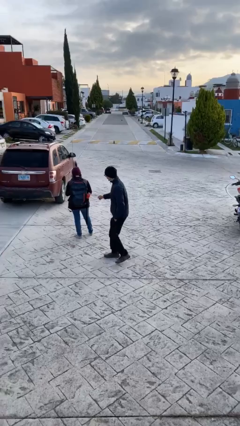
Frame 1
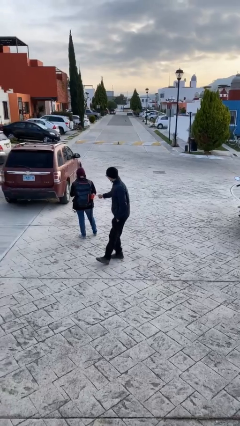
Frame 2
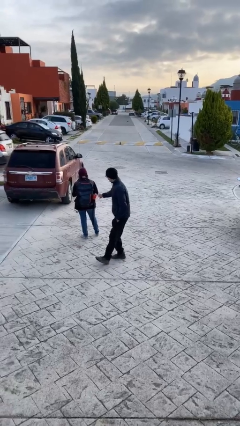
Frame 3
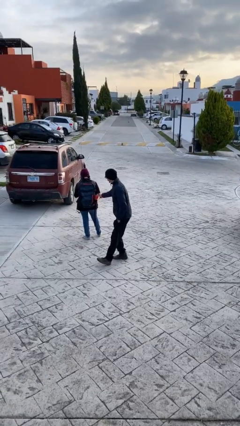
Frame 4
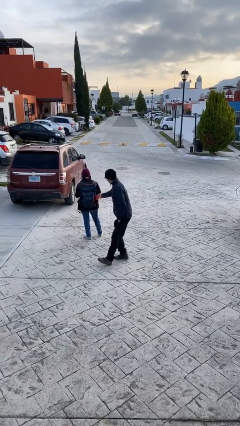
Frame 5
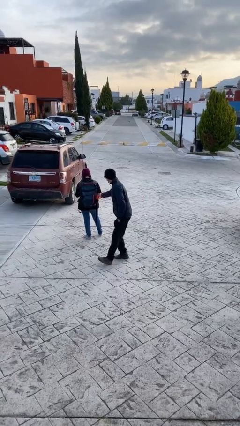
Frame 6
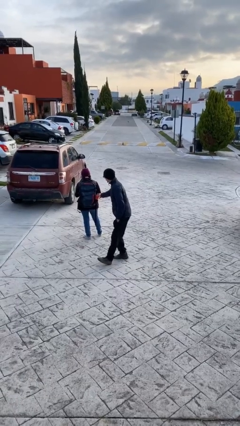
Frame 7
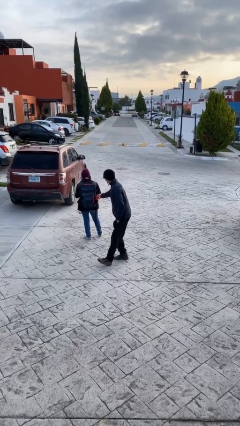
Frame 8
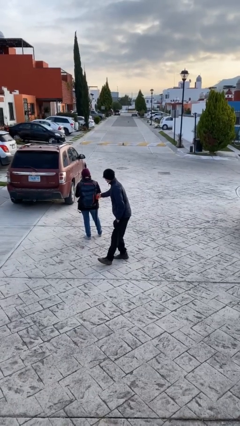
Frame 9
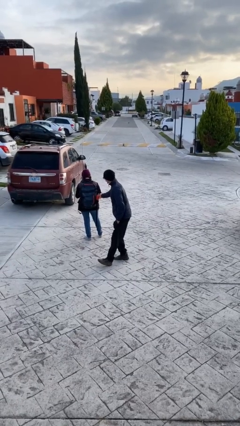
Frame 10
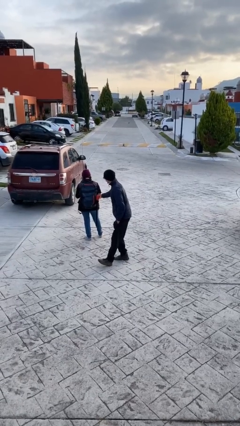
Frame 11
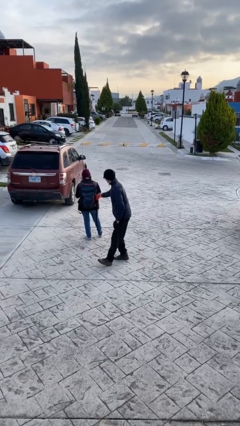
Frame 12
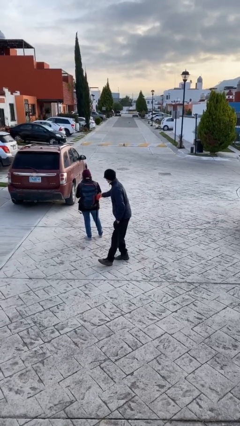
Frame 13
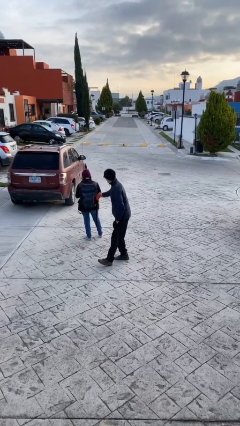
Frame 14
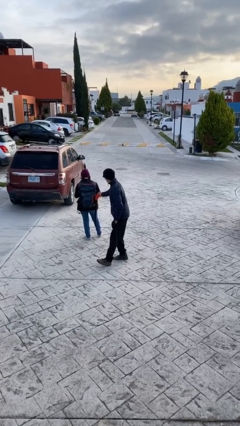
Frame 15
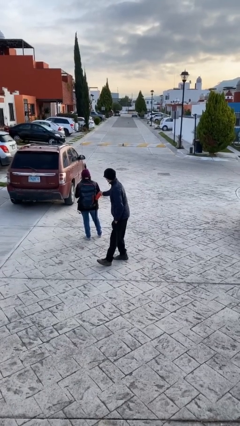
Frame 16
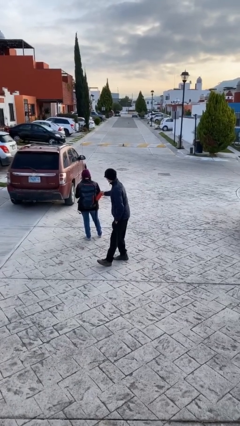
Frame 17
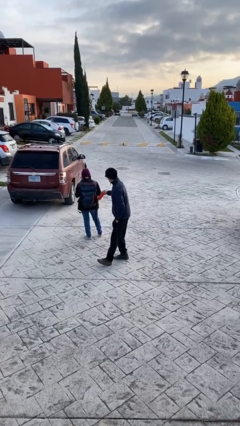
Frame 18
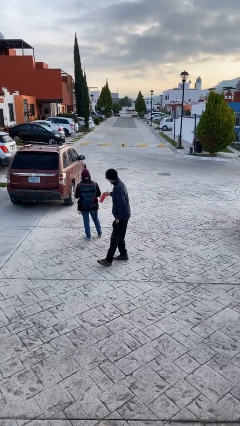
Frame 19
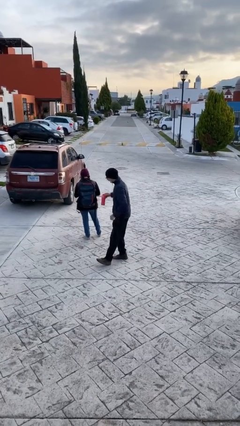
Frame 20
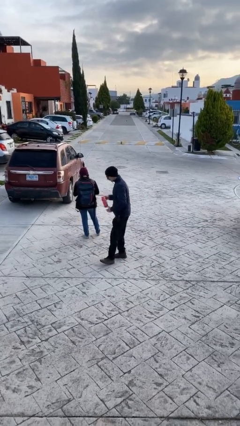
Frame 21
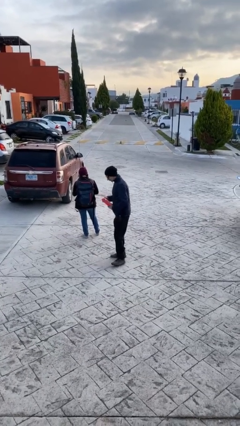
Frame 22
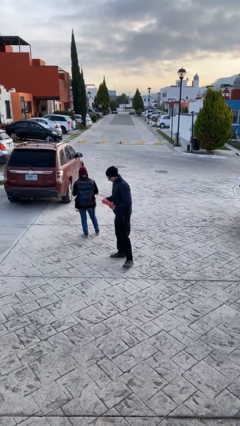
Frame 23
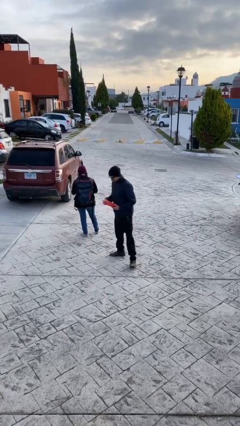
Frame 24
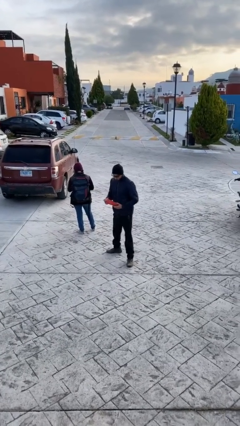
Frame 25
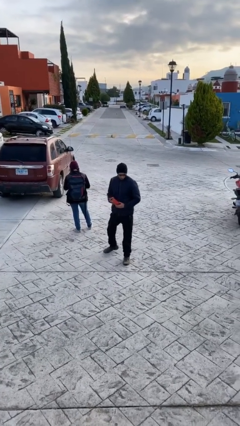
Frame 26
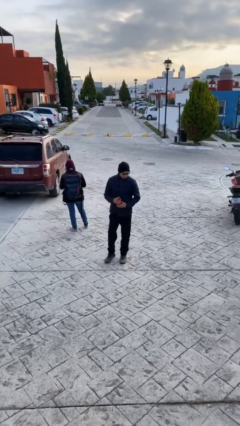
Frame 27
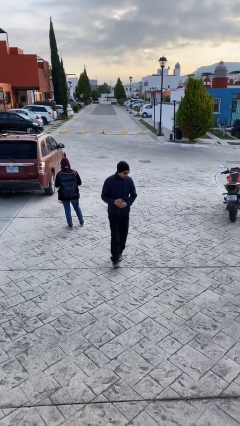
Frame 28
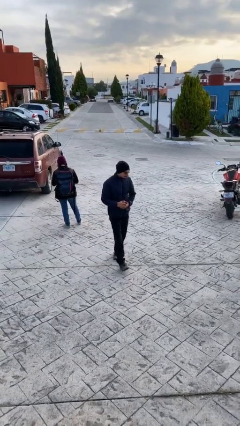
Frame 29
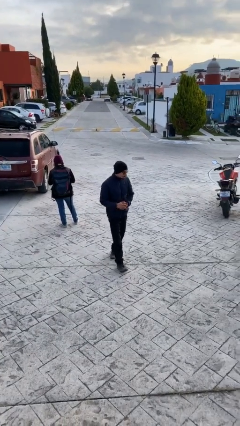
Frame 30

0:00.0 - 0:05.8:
person steals object from person

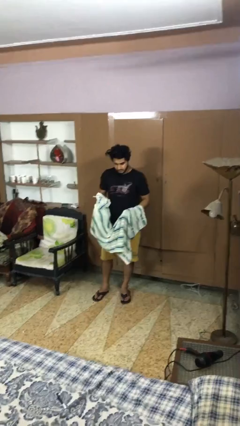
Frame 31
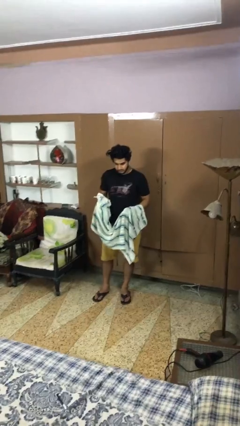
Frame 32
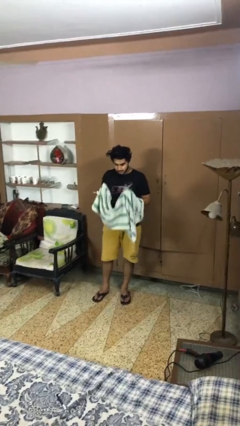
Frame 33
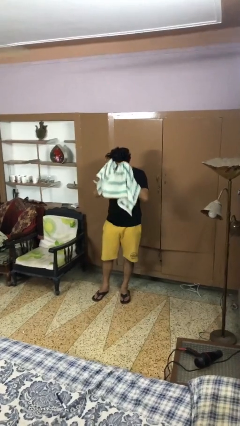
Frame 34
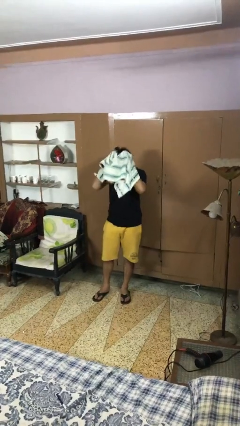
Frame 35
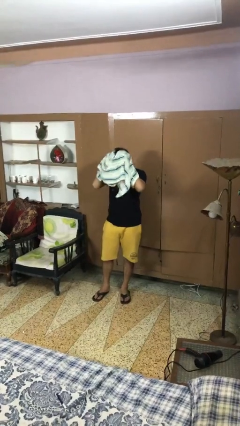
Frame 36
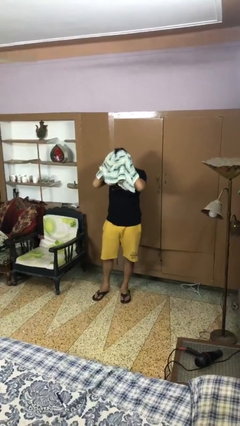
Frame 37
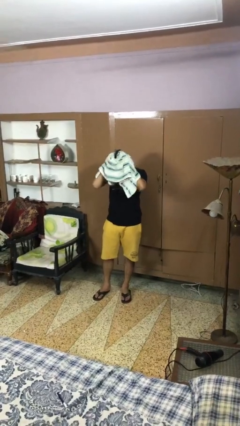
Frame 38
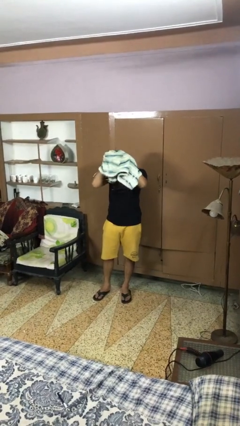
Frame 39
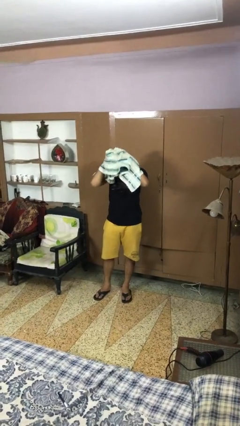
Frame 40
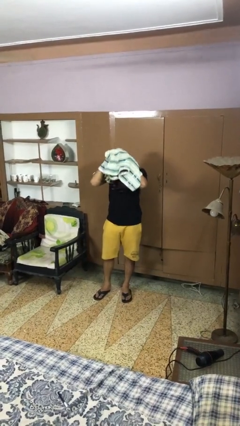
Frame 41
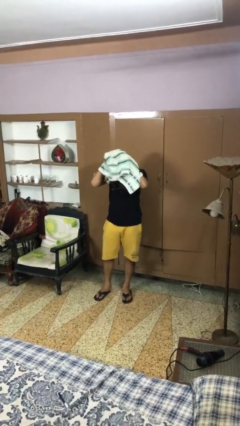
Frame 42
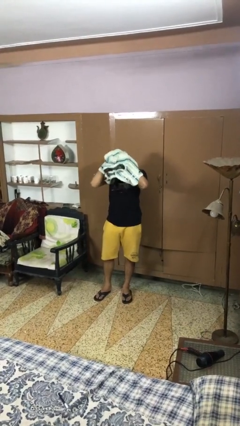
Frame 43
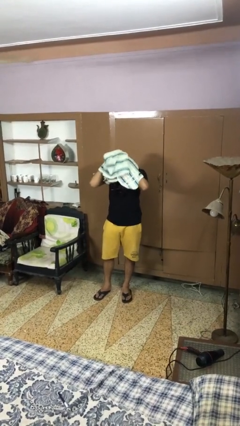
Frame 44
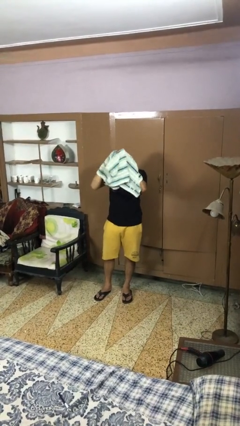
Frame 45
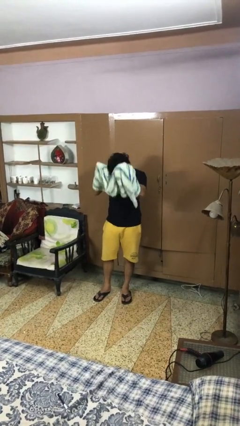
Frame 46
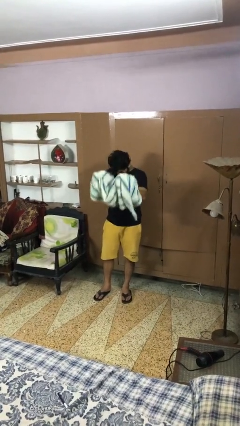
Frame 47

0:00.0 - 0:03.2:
person dries hair with towel

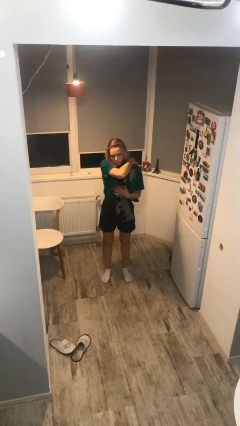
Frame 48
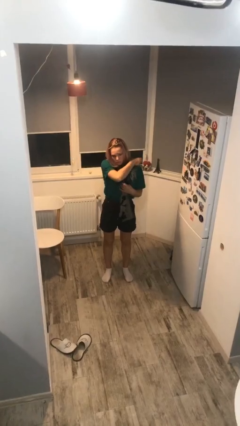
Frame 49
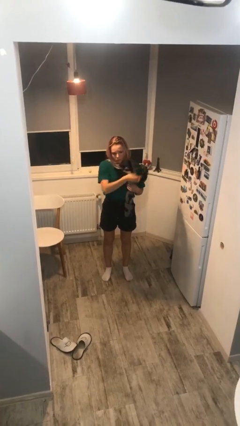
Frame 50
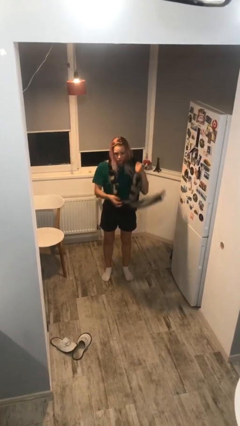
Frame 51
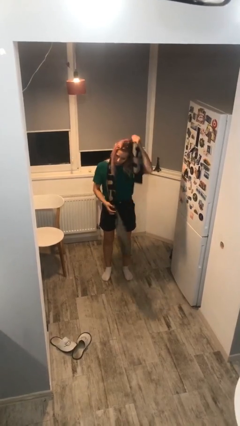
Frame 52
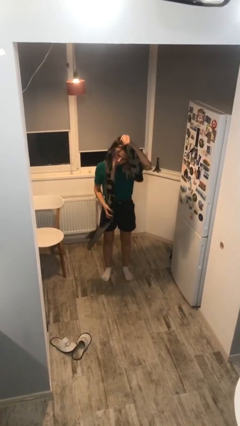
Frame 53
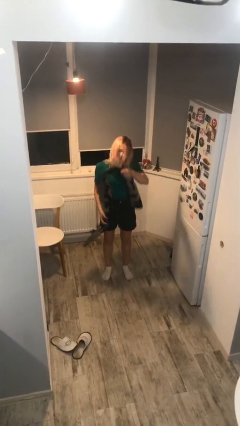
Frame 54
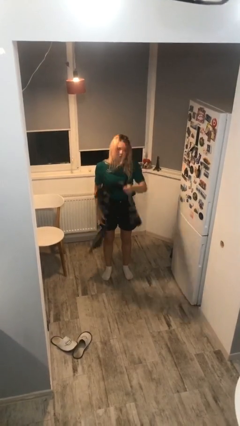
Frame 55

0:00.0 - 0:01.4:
person takes off scarf

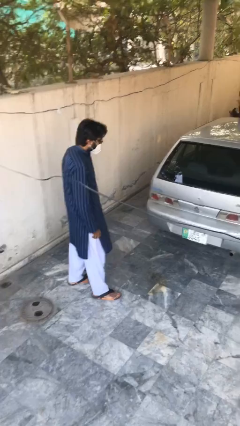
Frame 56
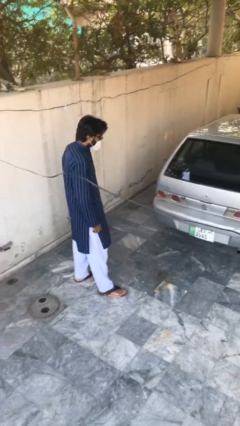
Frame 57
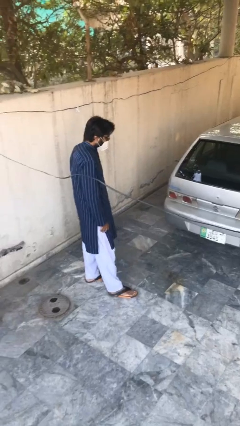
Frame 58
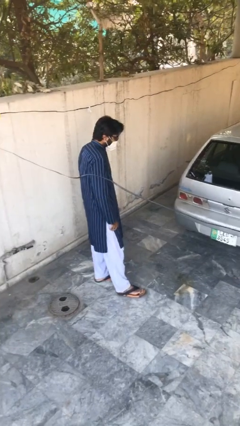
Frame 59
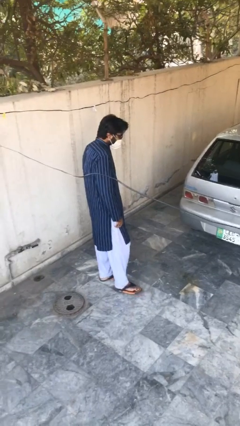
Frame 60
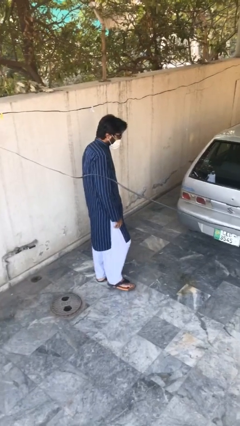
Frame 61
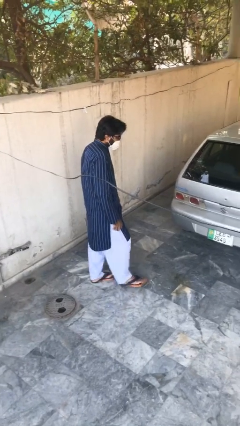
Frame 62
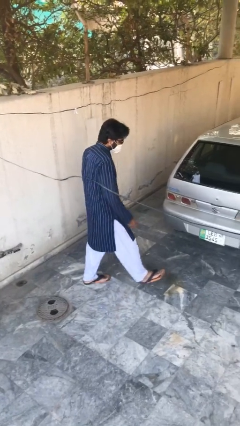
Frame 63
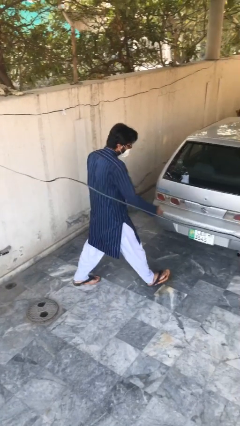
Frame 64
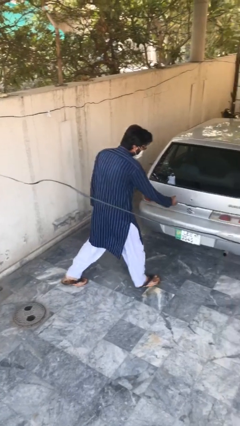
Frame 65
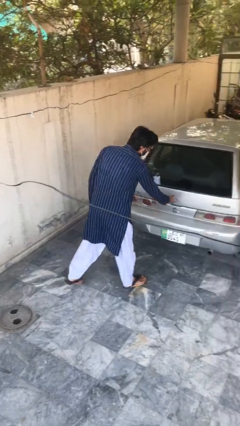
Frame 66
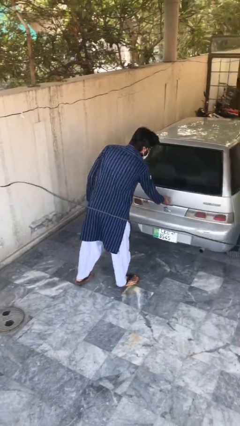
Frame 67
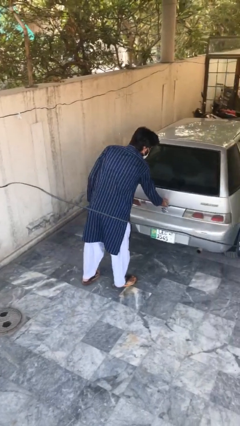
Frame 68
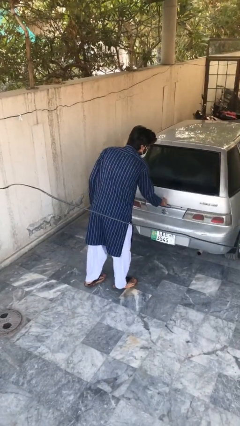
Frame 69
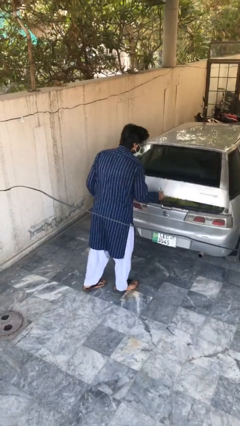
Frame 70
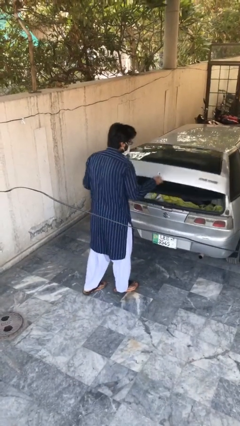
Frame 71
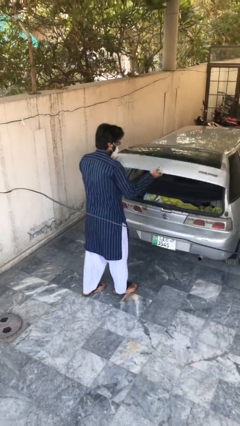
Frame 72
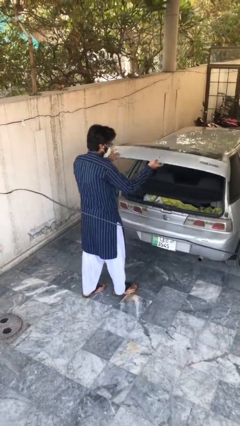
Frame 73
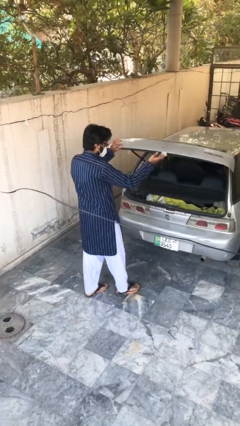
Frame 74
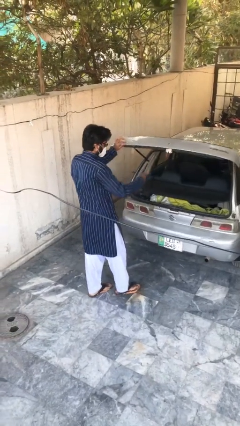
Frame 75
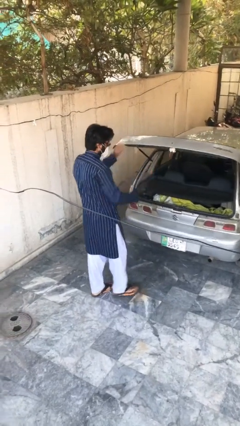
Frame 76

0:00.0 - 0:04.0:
person opens car trunk

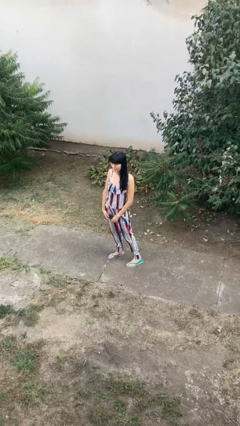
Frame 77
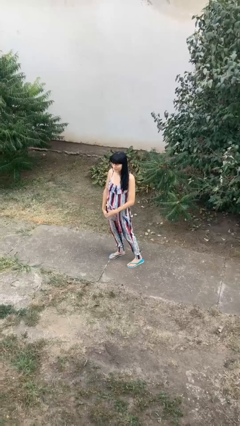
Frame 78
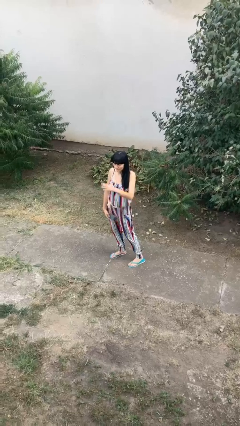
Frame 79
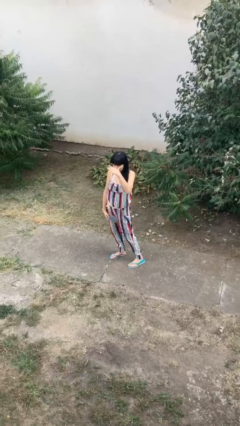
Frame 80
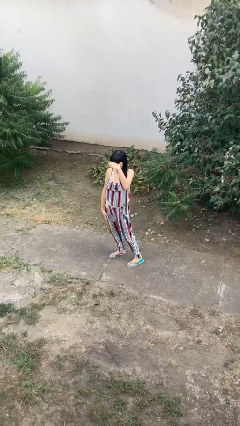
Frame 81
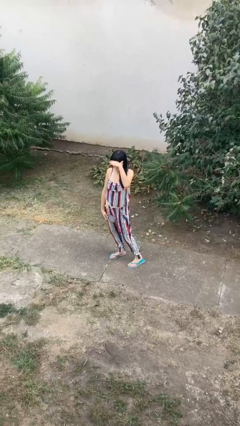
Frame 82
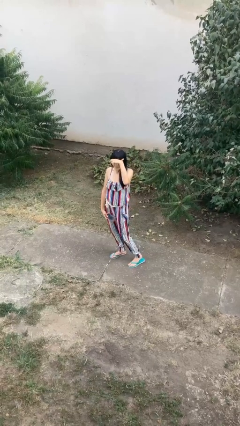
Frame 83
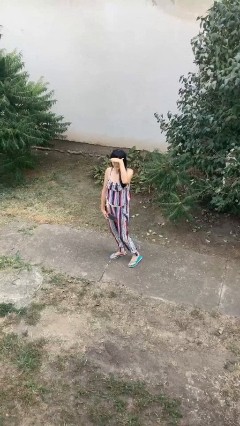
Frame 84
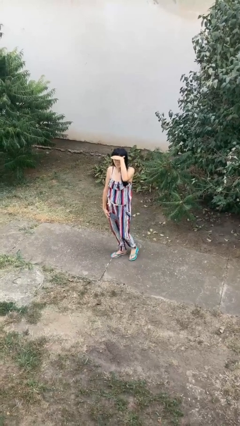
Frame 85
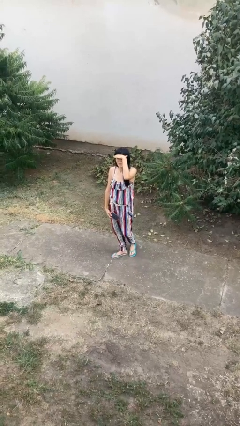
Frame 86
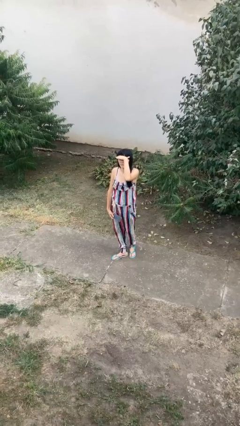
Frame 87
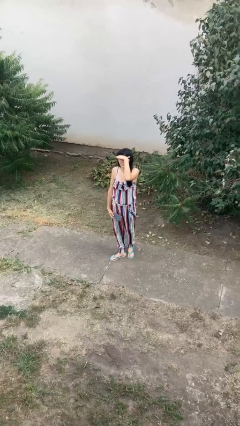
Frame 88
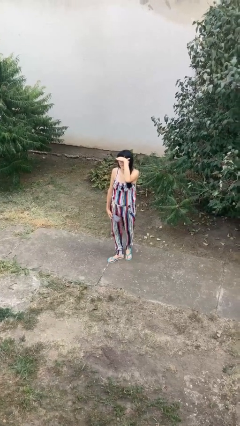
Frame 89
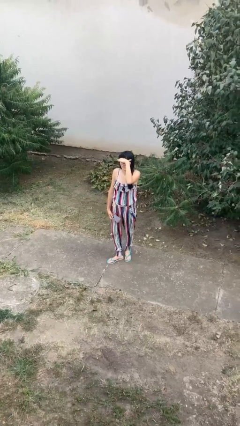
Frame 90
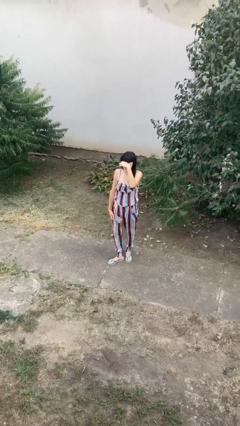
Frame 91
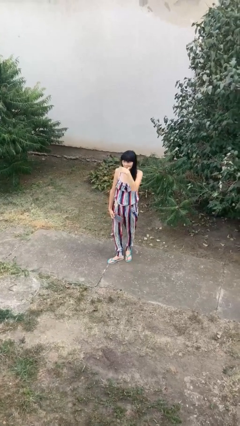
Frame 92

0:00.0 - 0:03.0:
person shades eyes
